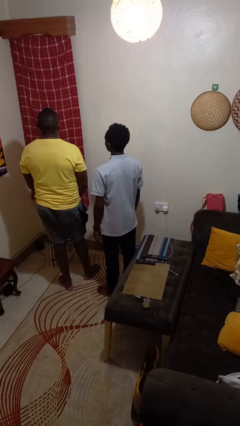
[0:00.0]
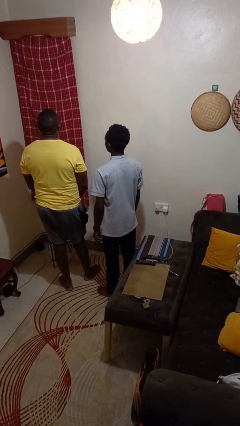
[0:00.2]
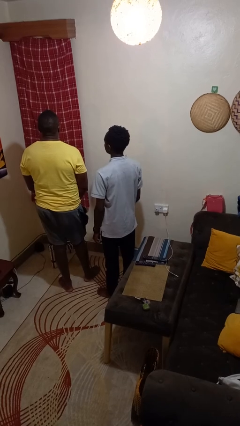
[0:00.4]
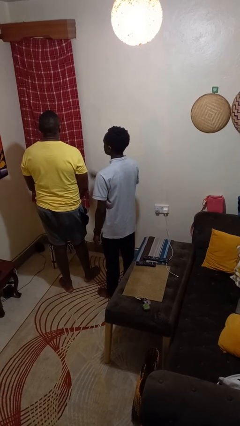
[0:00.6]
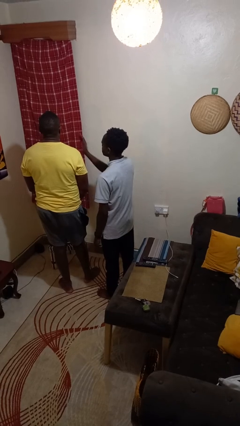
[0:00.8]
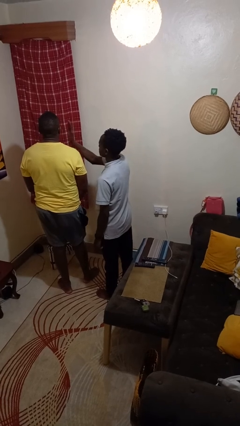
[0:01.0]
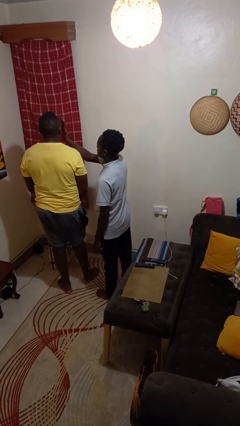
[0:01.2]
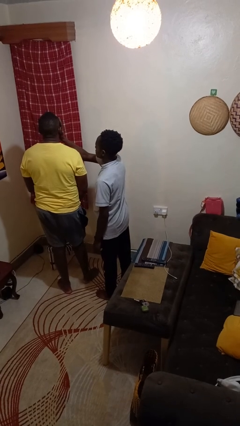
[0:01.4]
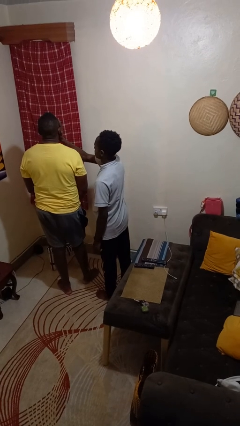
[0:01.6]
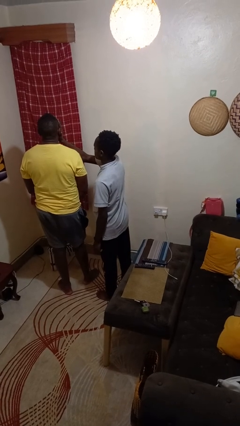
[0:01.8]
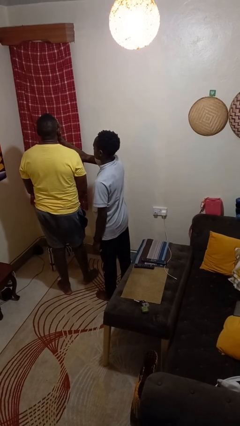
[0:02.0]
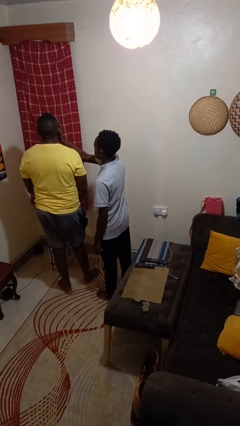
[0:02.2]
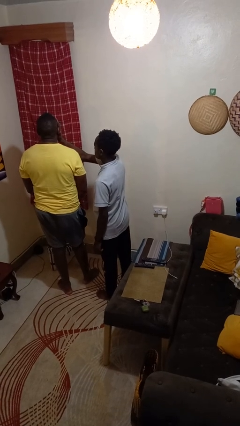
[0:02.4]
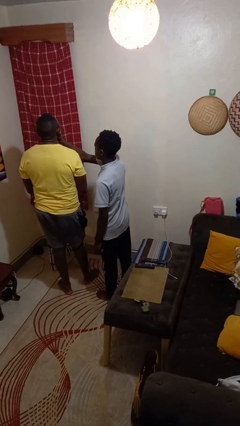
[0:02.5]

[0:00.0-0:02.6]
person touches face of person

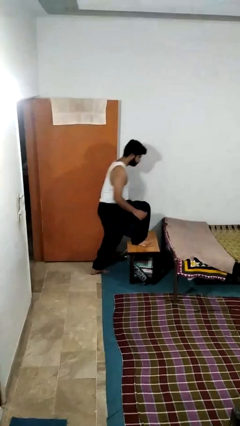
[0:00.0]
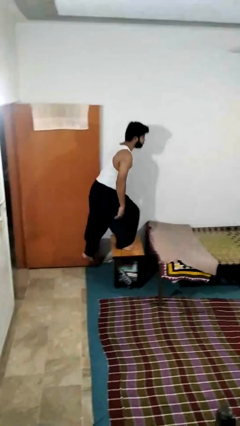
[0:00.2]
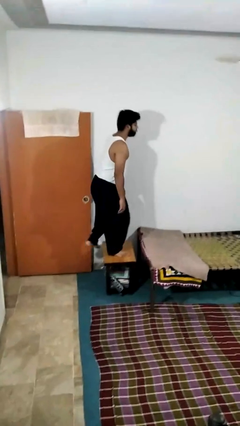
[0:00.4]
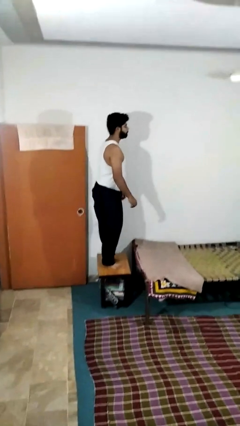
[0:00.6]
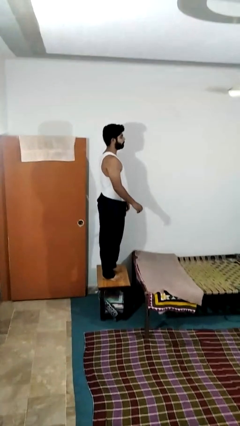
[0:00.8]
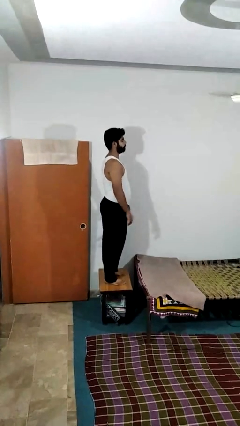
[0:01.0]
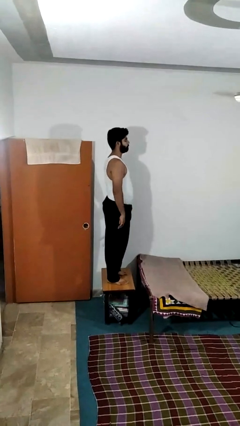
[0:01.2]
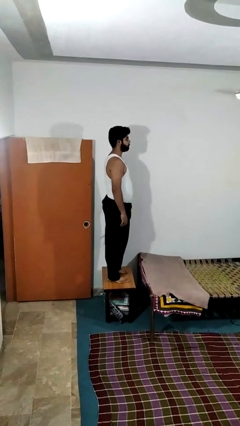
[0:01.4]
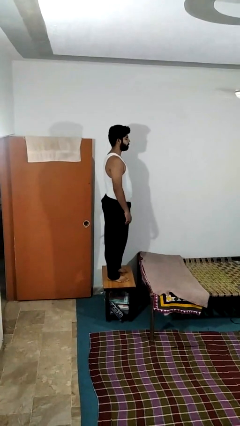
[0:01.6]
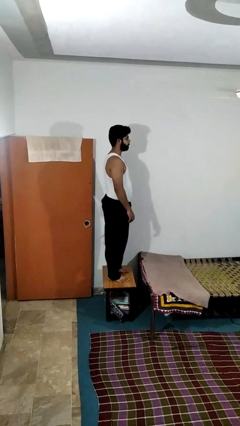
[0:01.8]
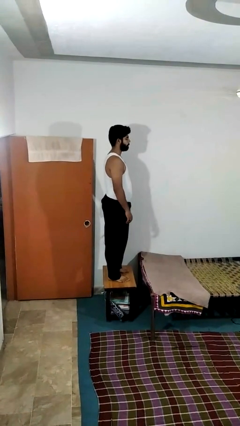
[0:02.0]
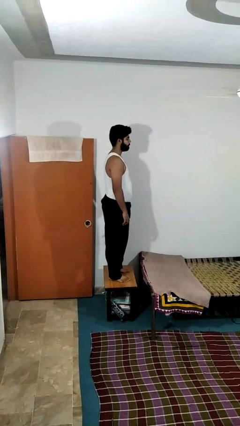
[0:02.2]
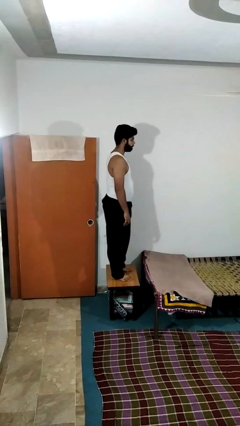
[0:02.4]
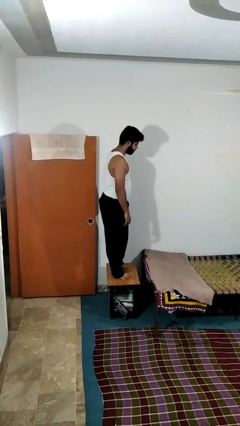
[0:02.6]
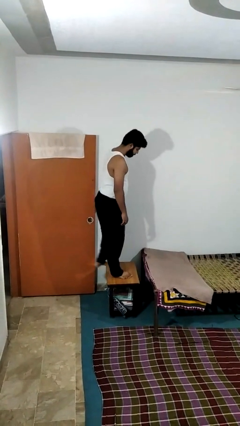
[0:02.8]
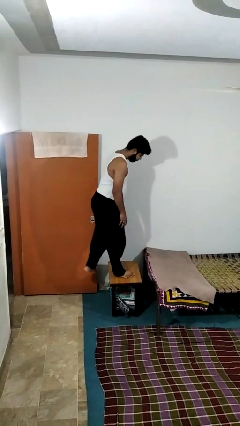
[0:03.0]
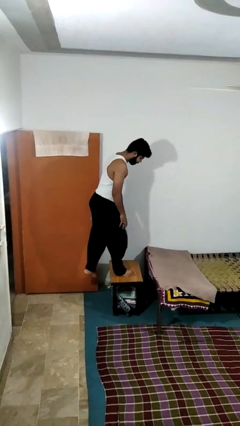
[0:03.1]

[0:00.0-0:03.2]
person climbs on table

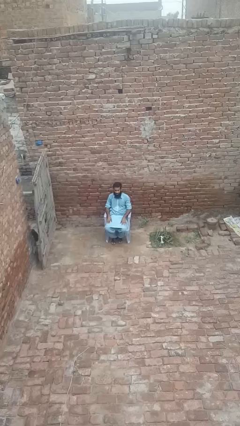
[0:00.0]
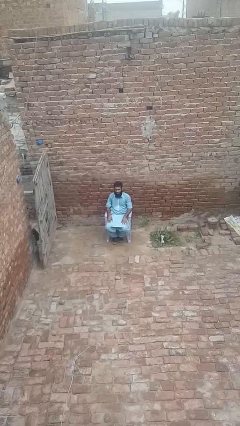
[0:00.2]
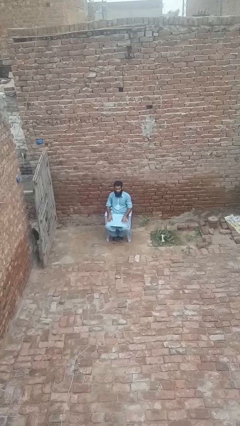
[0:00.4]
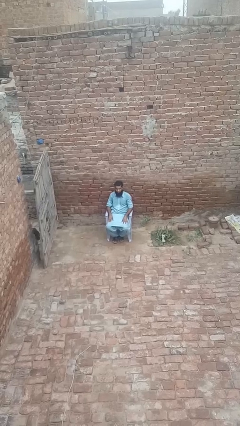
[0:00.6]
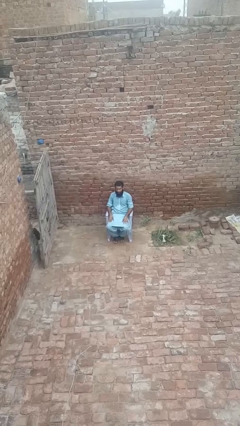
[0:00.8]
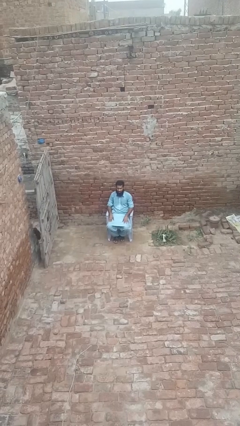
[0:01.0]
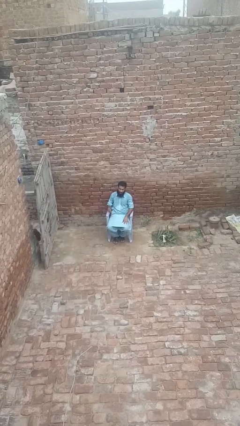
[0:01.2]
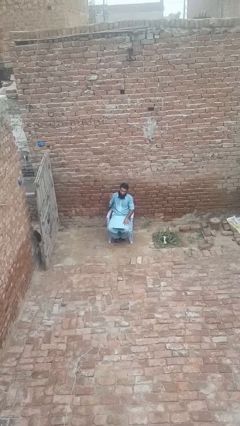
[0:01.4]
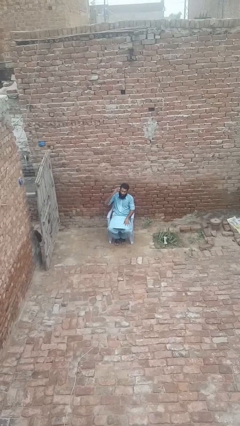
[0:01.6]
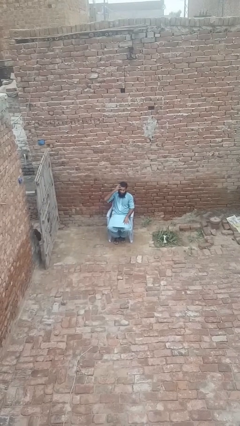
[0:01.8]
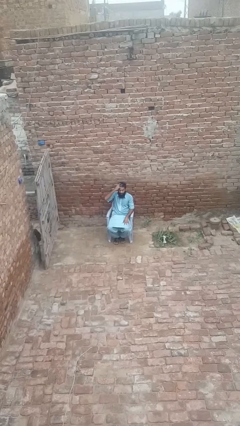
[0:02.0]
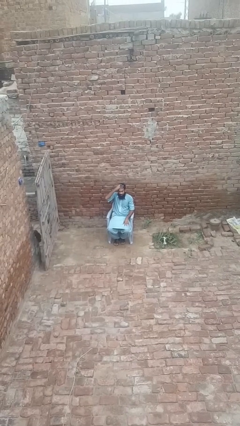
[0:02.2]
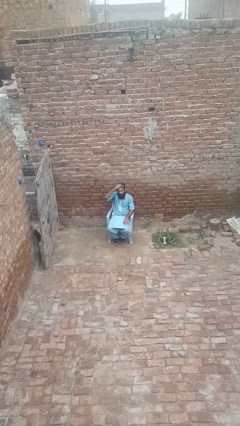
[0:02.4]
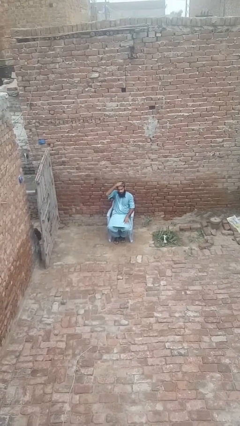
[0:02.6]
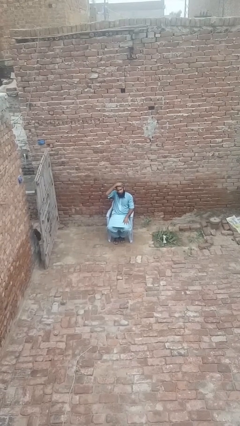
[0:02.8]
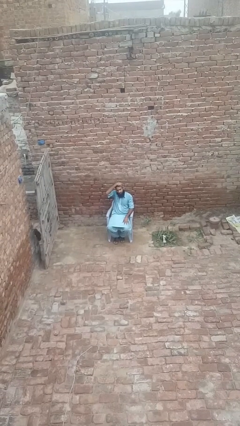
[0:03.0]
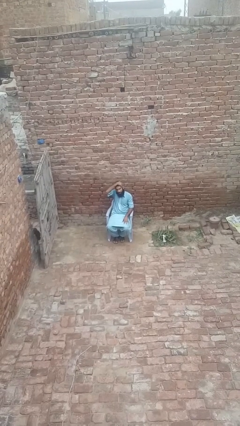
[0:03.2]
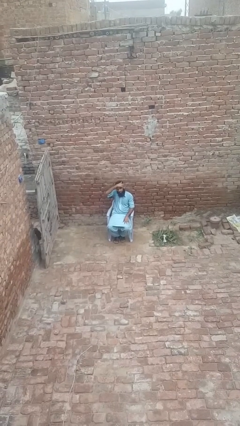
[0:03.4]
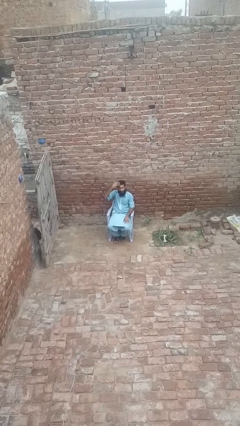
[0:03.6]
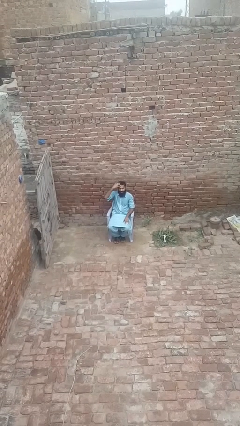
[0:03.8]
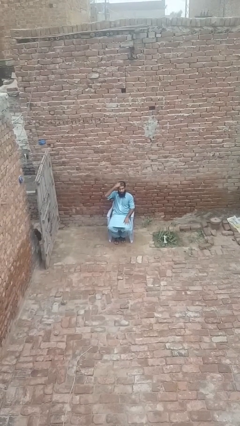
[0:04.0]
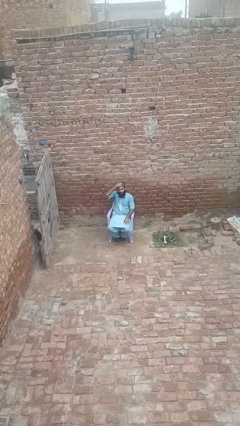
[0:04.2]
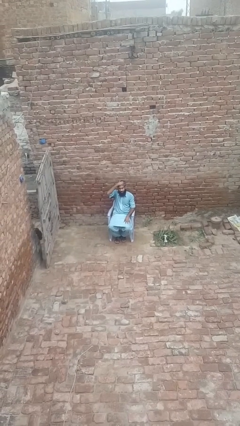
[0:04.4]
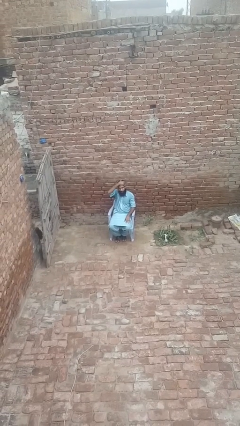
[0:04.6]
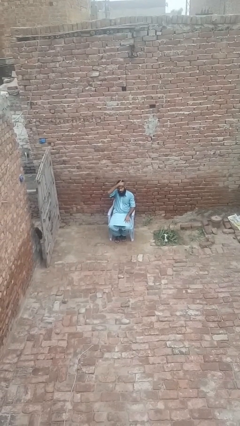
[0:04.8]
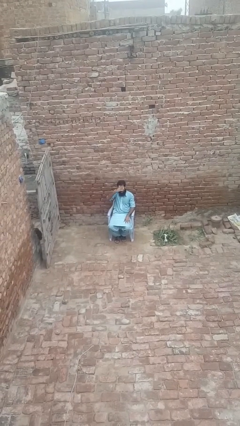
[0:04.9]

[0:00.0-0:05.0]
person strokes hair

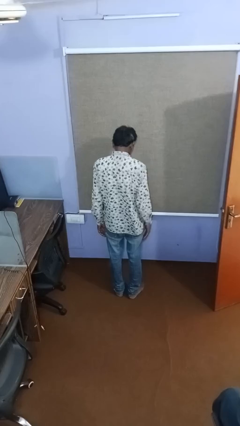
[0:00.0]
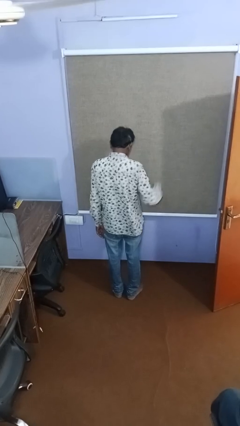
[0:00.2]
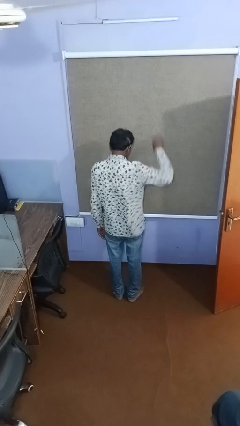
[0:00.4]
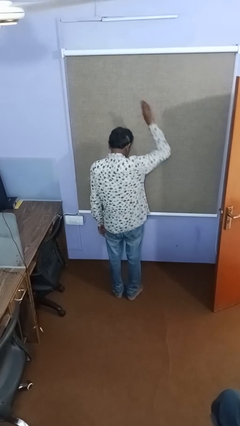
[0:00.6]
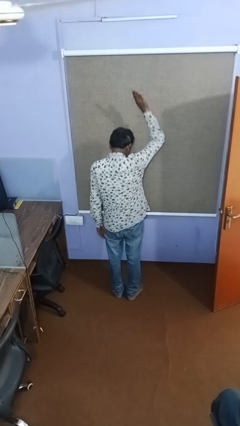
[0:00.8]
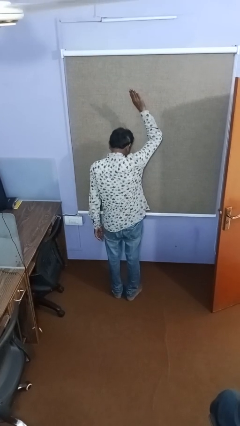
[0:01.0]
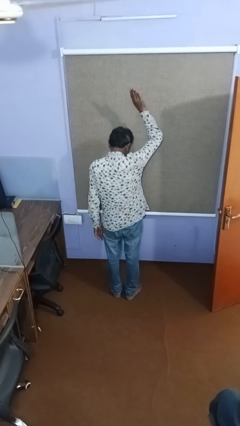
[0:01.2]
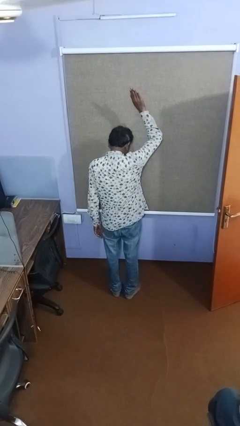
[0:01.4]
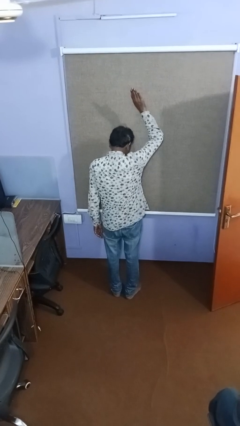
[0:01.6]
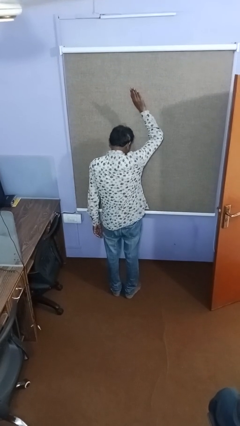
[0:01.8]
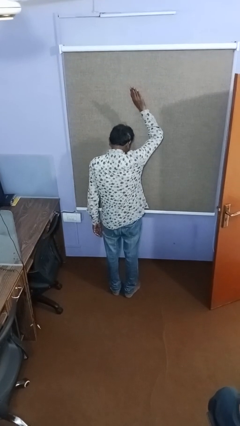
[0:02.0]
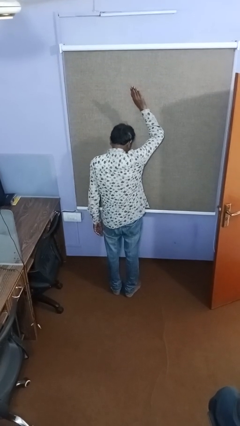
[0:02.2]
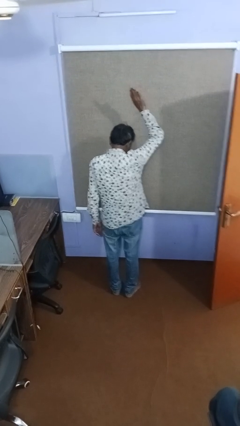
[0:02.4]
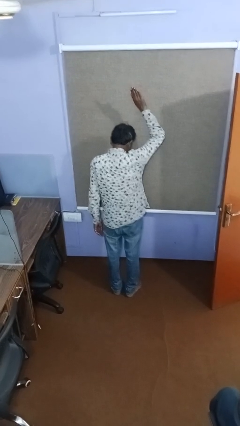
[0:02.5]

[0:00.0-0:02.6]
person gestures raise hand

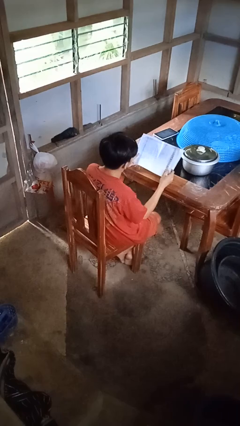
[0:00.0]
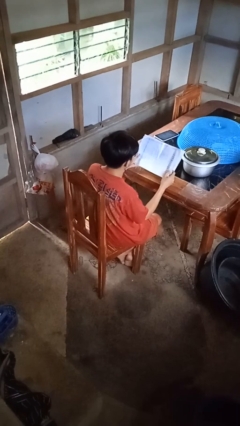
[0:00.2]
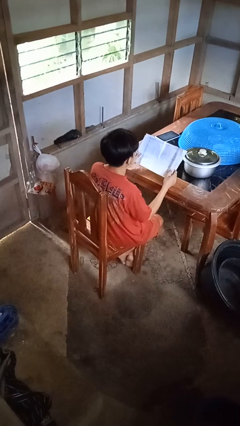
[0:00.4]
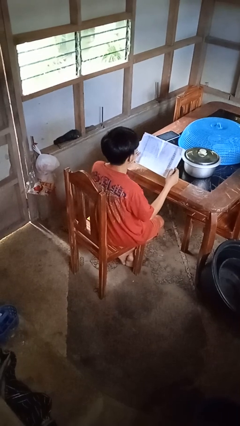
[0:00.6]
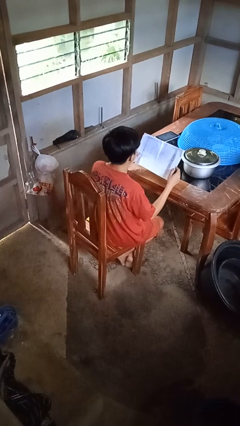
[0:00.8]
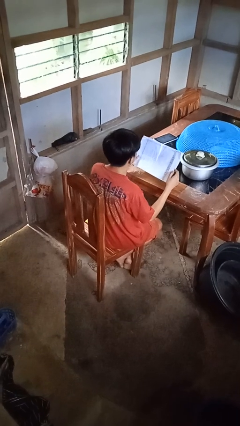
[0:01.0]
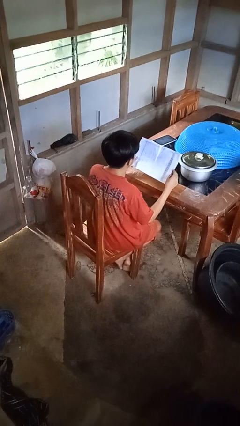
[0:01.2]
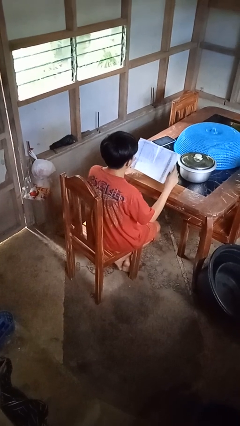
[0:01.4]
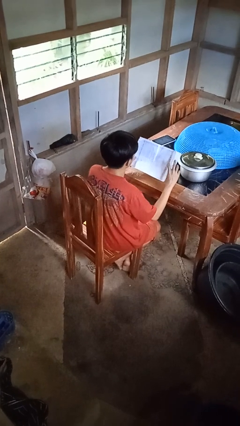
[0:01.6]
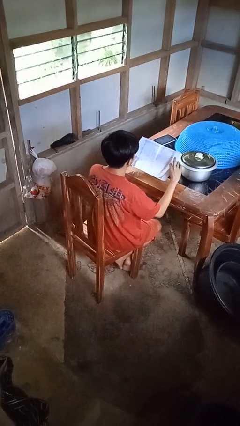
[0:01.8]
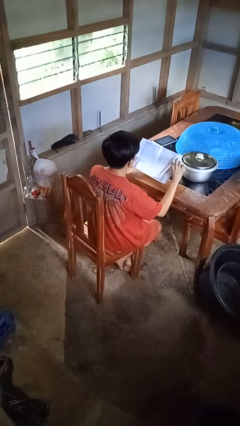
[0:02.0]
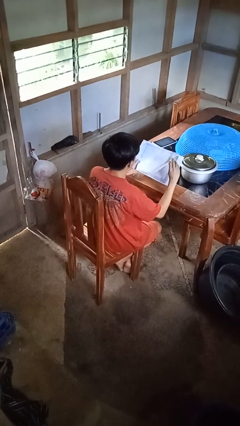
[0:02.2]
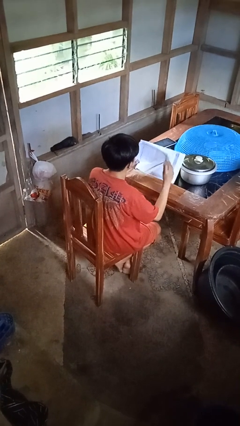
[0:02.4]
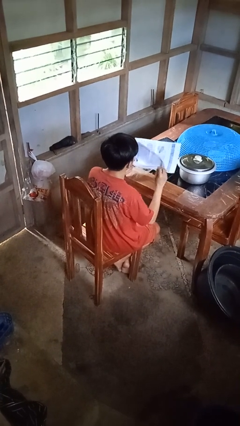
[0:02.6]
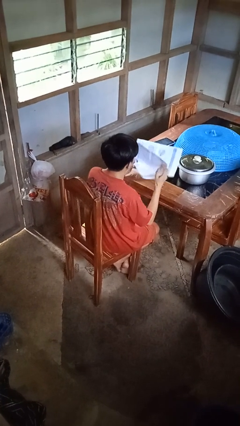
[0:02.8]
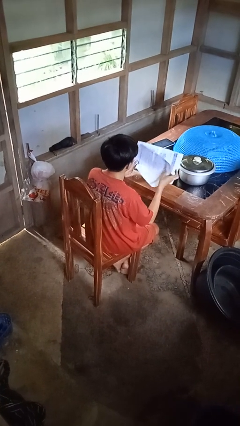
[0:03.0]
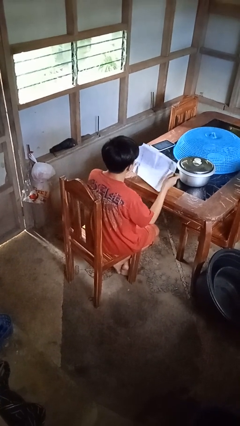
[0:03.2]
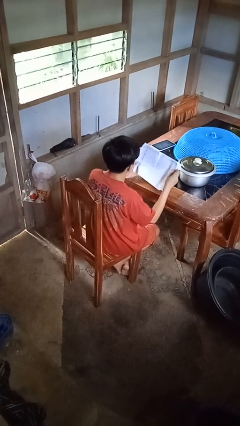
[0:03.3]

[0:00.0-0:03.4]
person reads newspaper

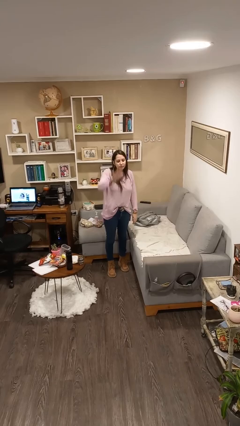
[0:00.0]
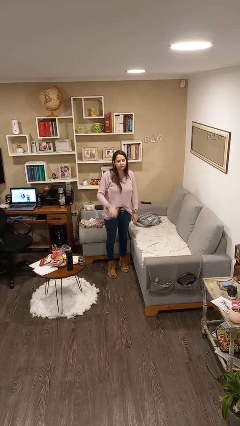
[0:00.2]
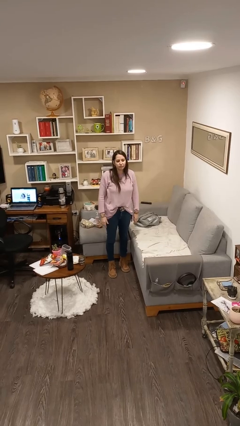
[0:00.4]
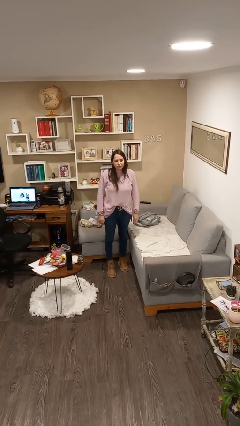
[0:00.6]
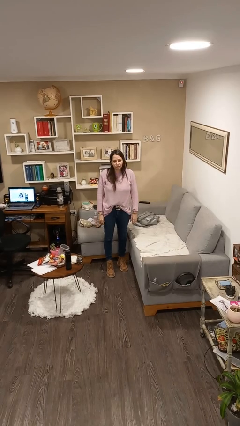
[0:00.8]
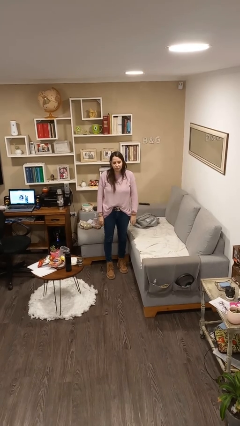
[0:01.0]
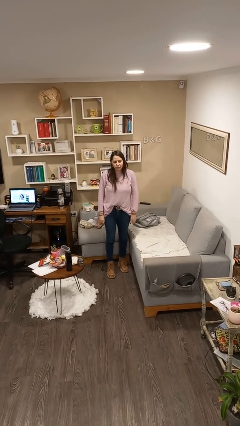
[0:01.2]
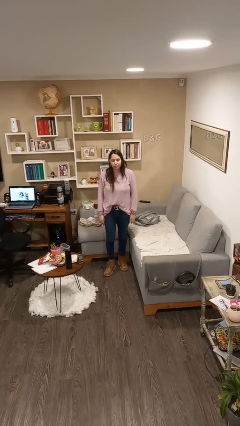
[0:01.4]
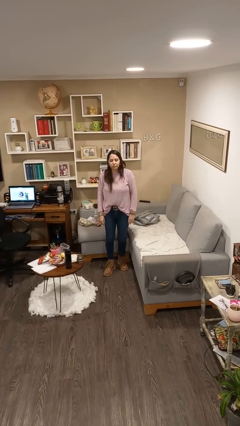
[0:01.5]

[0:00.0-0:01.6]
person gestures lower hand
